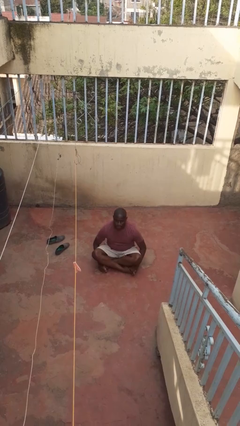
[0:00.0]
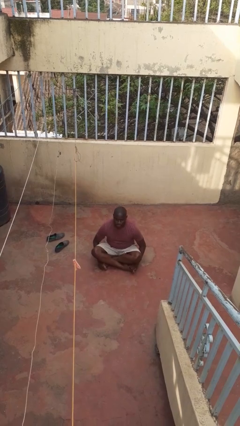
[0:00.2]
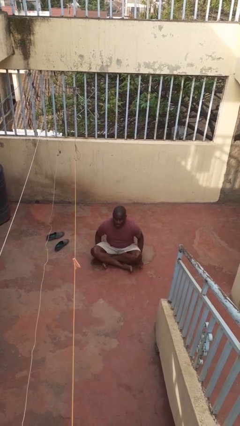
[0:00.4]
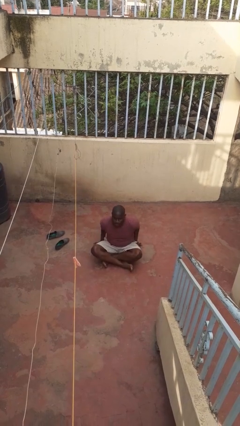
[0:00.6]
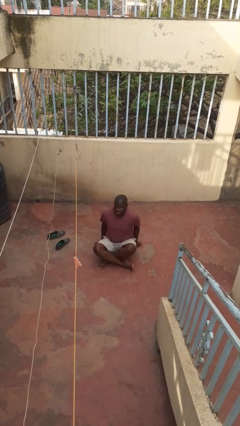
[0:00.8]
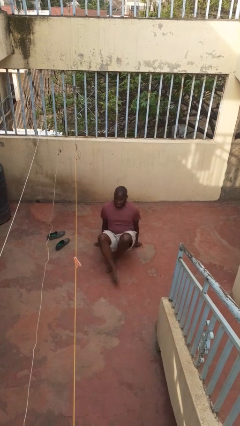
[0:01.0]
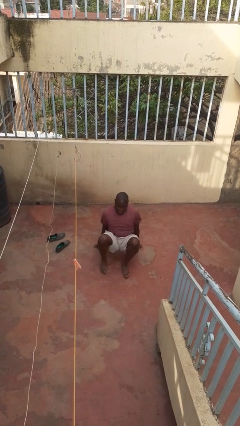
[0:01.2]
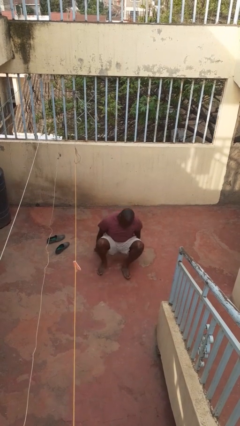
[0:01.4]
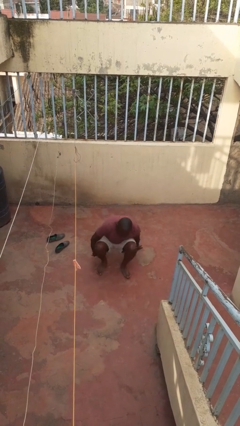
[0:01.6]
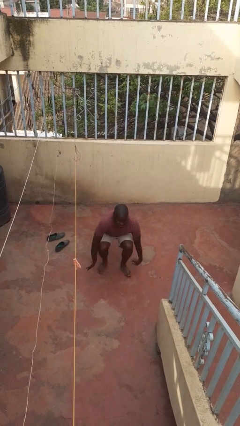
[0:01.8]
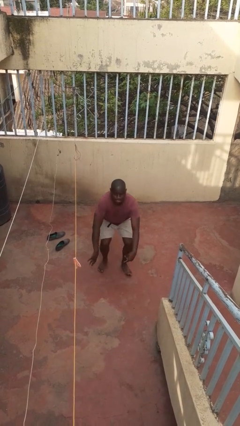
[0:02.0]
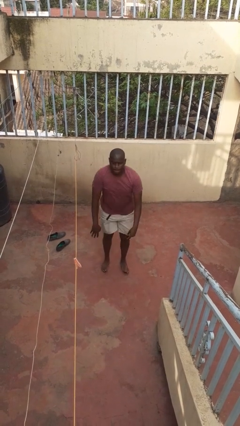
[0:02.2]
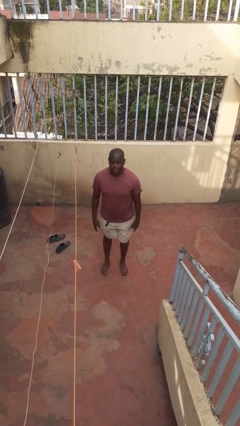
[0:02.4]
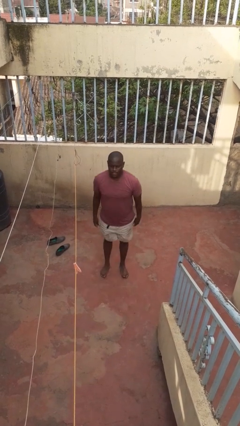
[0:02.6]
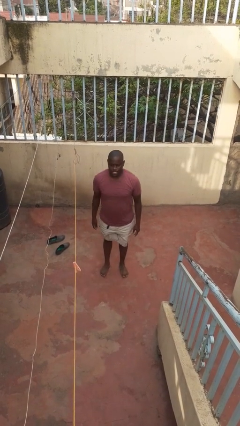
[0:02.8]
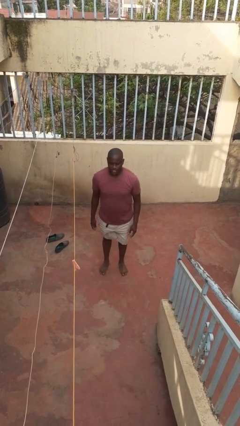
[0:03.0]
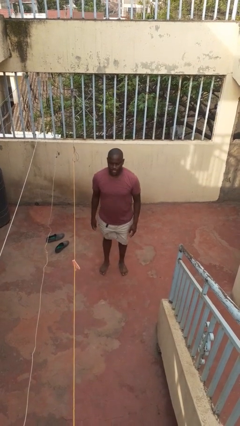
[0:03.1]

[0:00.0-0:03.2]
person stands up from floor

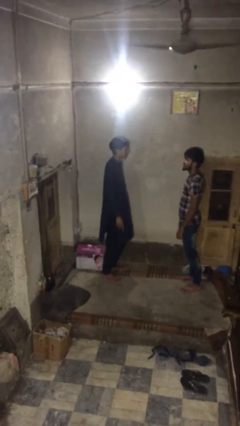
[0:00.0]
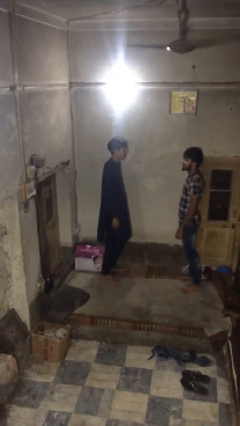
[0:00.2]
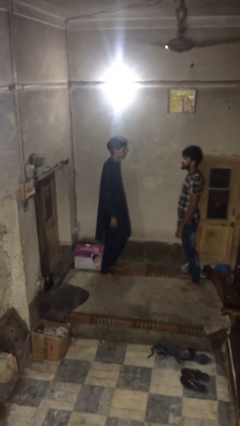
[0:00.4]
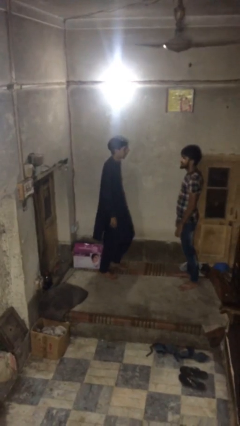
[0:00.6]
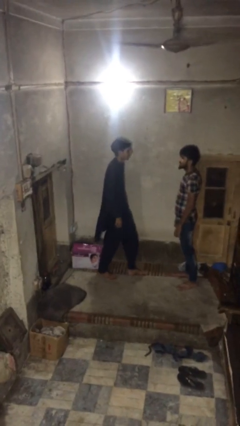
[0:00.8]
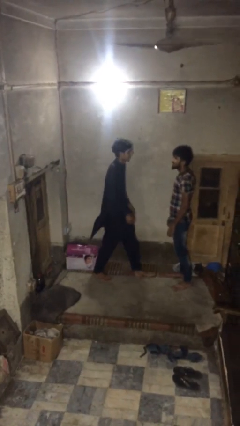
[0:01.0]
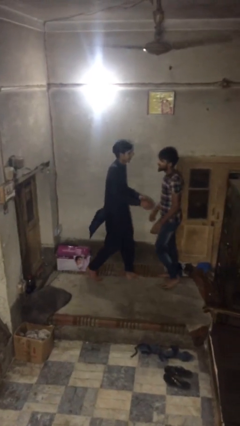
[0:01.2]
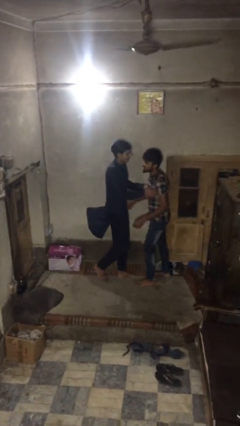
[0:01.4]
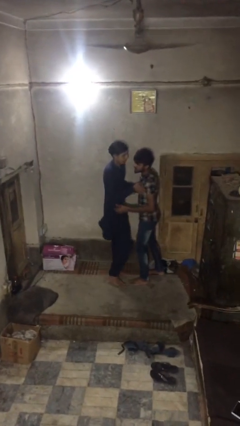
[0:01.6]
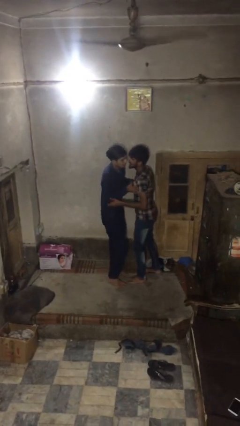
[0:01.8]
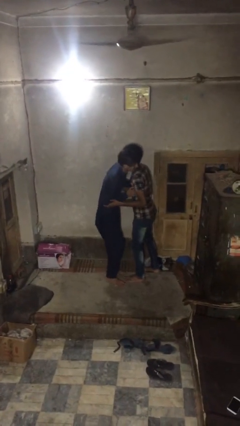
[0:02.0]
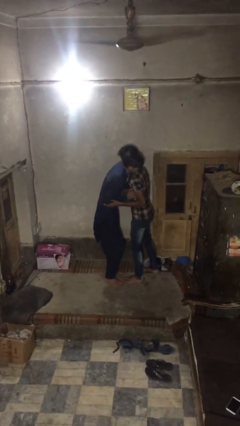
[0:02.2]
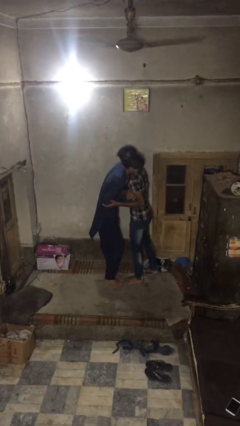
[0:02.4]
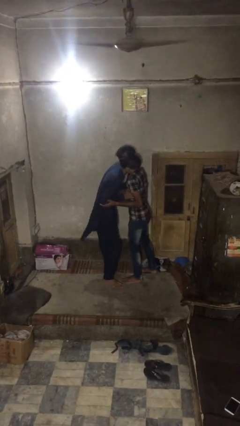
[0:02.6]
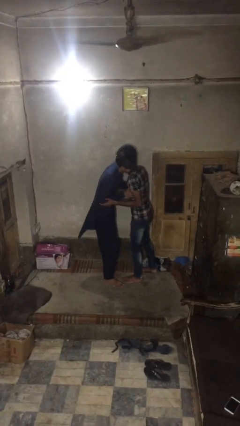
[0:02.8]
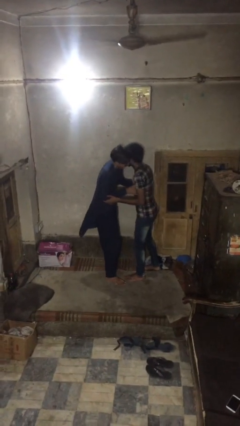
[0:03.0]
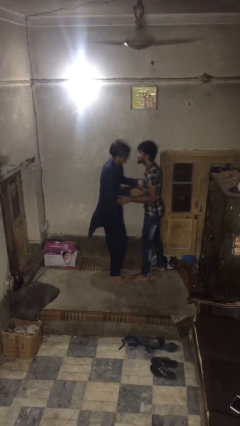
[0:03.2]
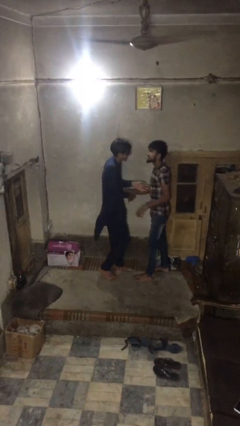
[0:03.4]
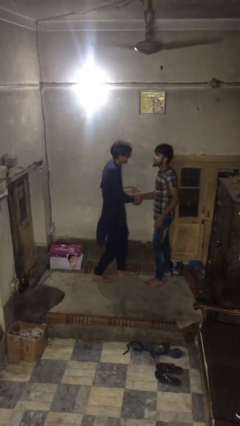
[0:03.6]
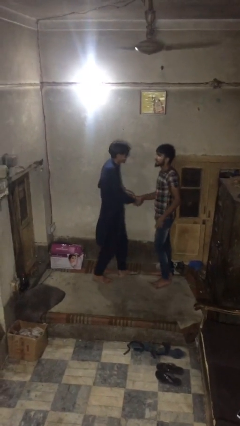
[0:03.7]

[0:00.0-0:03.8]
person embraces person

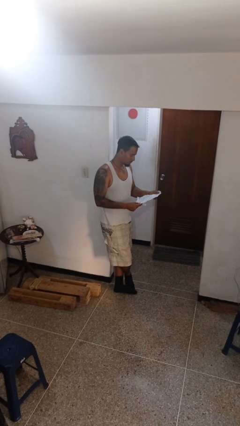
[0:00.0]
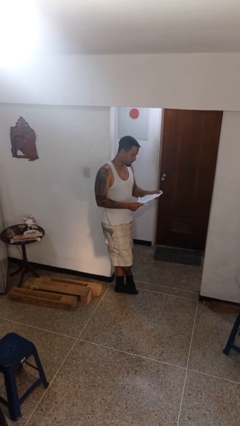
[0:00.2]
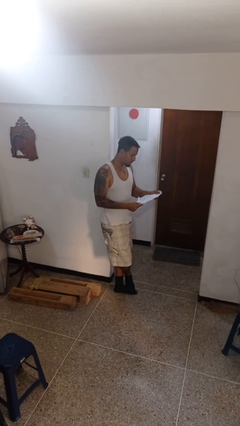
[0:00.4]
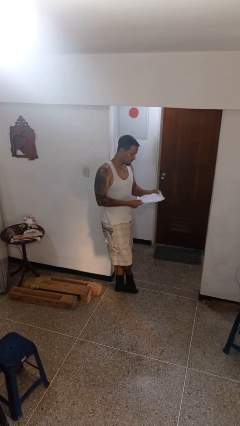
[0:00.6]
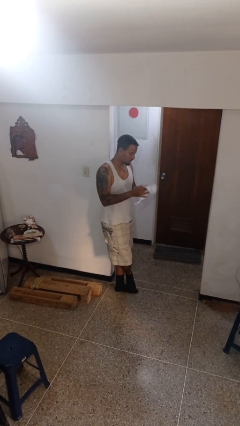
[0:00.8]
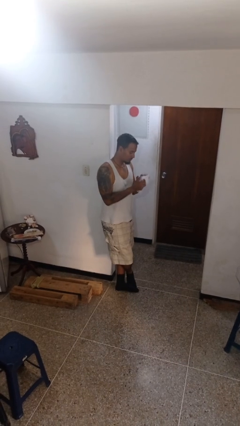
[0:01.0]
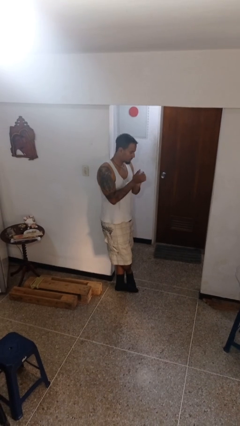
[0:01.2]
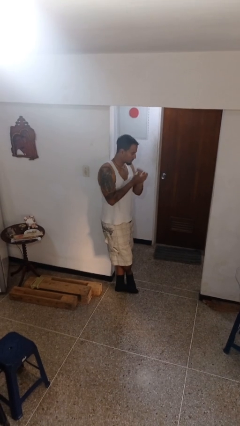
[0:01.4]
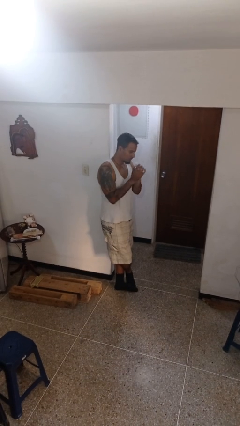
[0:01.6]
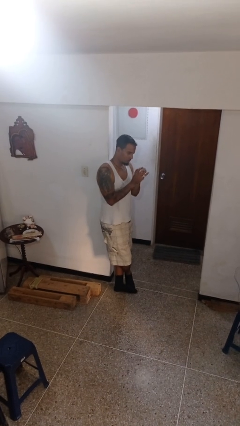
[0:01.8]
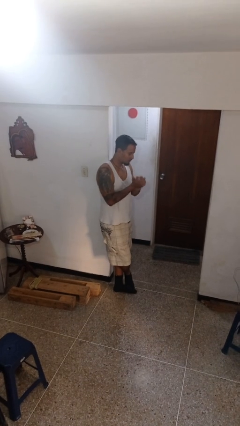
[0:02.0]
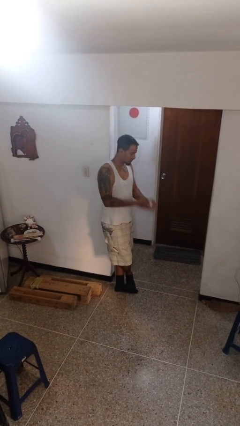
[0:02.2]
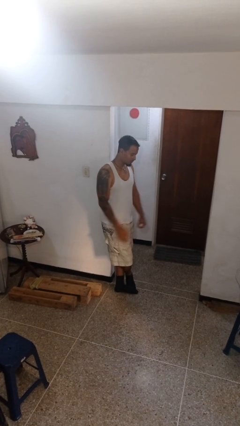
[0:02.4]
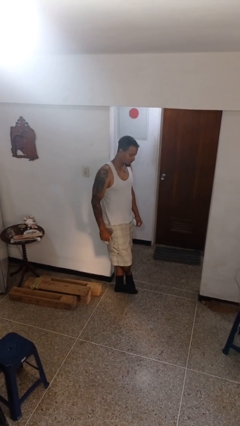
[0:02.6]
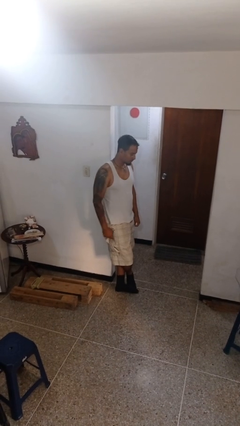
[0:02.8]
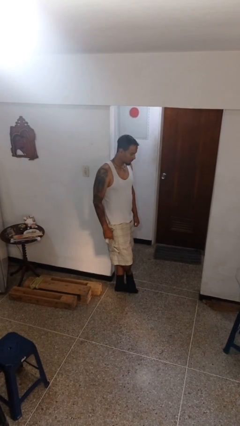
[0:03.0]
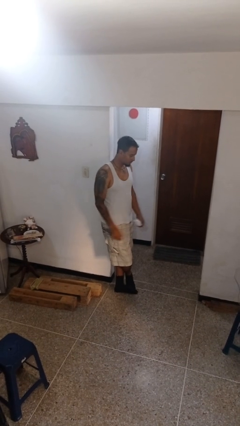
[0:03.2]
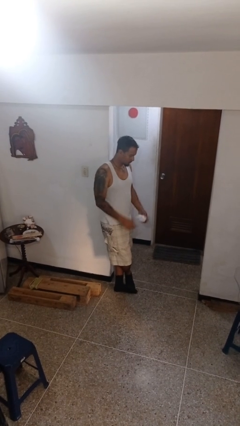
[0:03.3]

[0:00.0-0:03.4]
person crumples paper

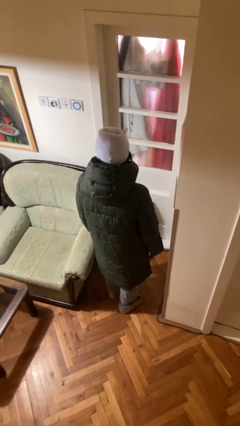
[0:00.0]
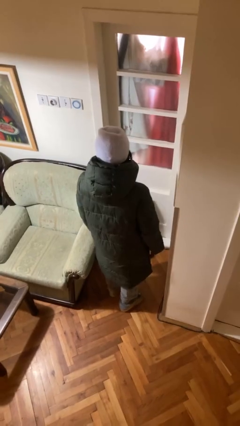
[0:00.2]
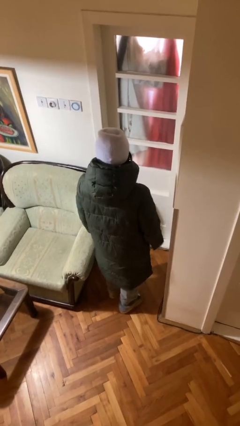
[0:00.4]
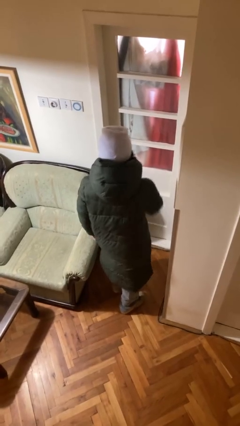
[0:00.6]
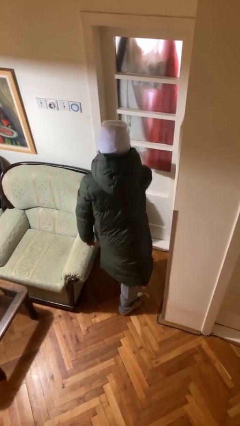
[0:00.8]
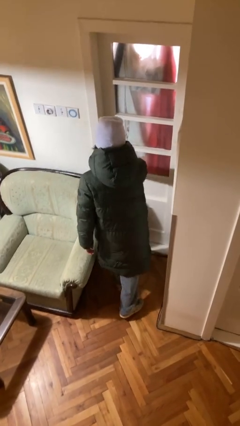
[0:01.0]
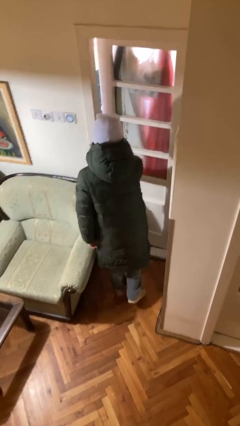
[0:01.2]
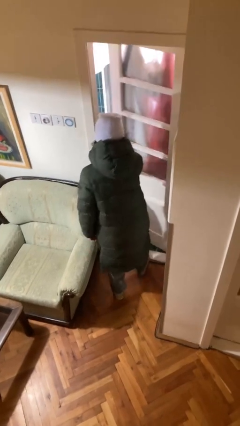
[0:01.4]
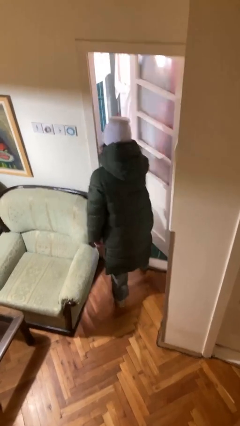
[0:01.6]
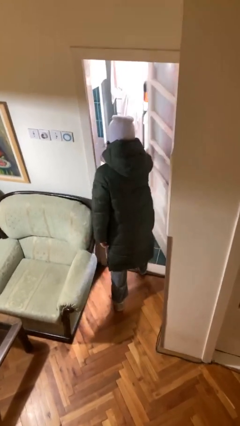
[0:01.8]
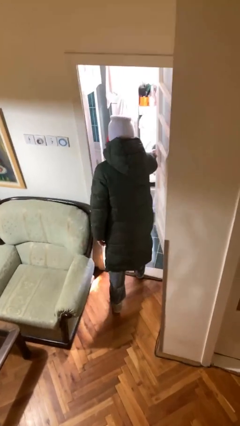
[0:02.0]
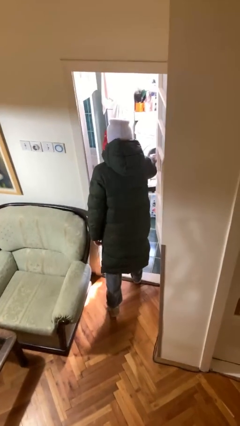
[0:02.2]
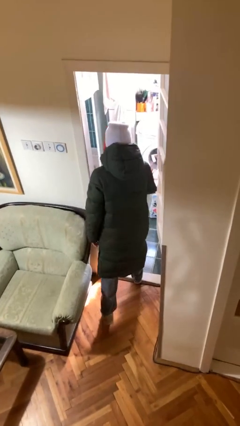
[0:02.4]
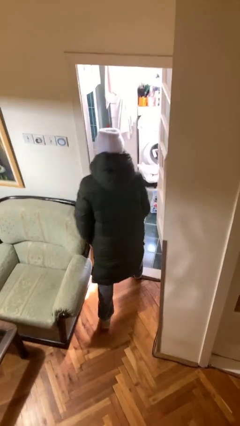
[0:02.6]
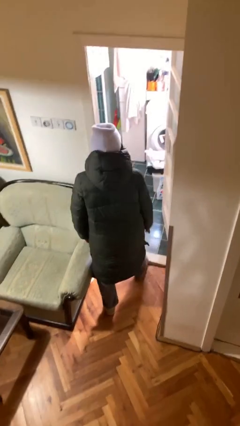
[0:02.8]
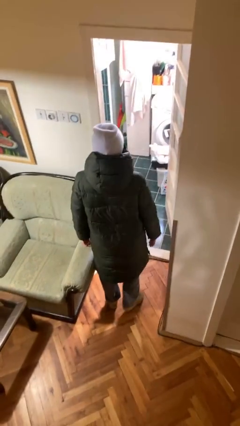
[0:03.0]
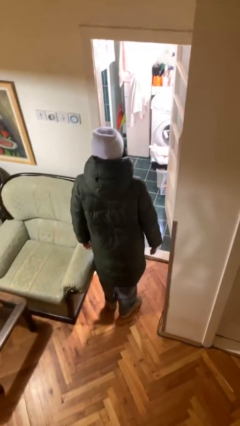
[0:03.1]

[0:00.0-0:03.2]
person opens facility door

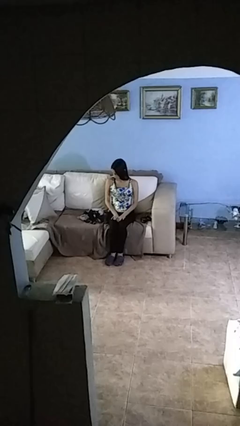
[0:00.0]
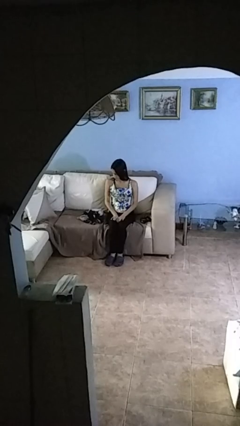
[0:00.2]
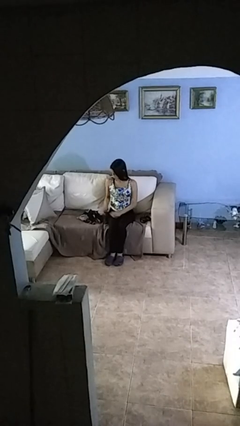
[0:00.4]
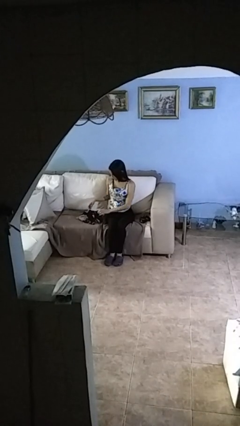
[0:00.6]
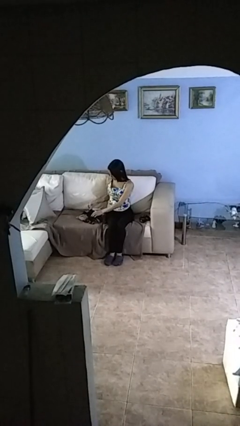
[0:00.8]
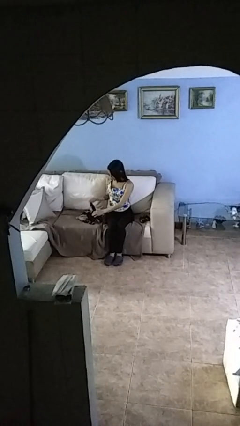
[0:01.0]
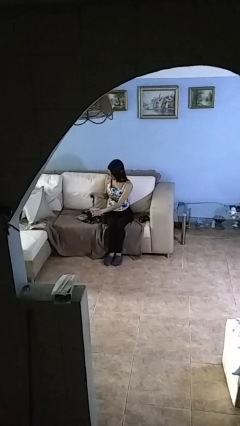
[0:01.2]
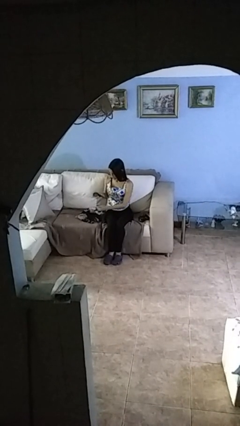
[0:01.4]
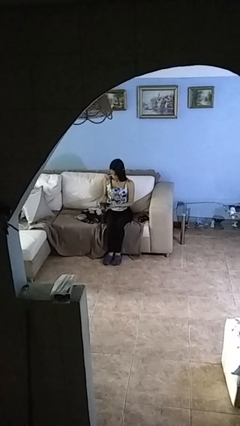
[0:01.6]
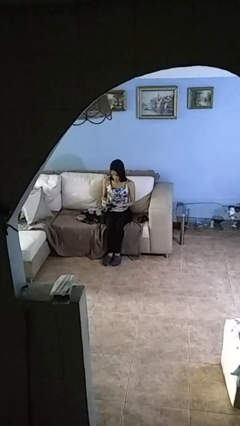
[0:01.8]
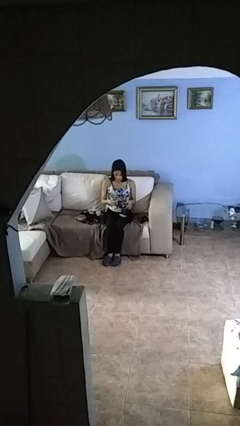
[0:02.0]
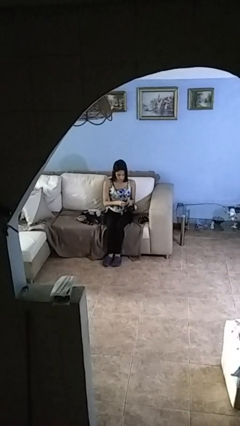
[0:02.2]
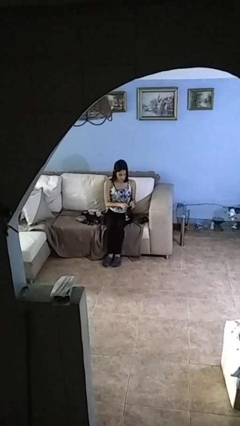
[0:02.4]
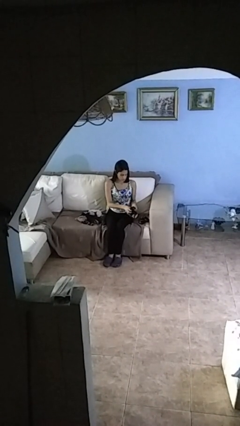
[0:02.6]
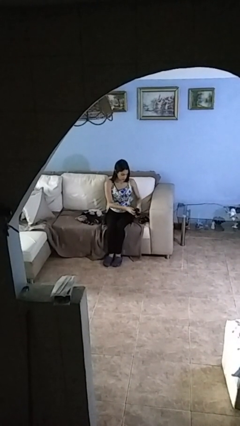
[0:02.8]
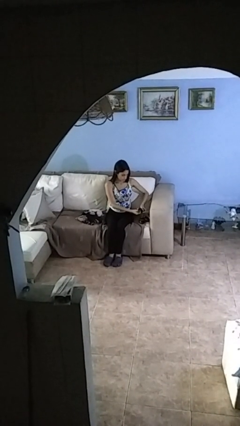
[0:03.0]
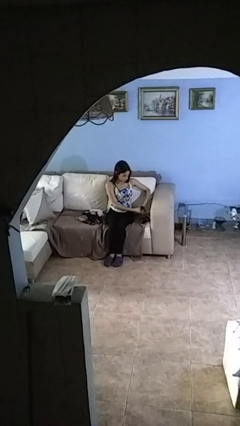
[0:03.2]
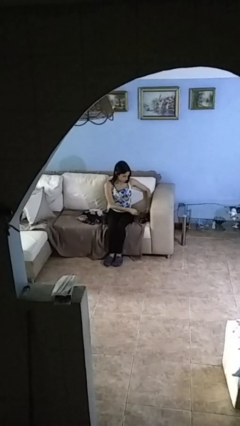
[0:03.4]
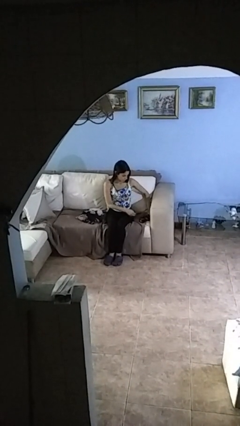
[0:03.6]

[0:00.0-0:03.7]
person folds socks

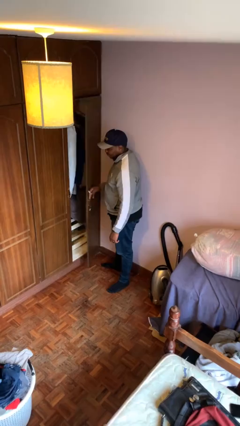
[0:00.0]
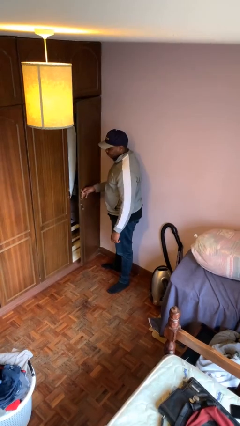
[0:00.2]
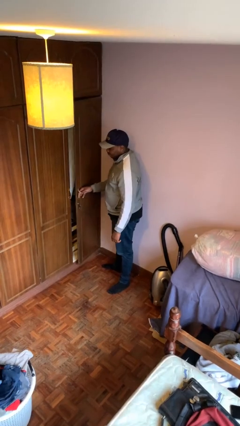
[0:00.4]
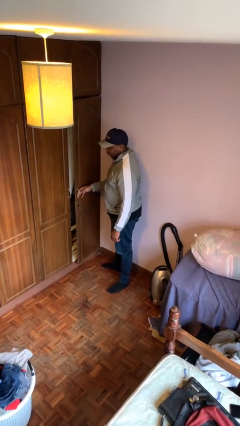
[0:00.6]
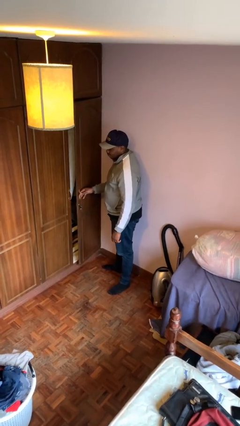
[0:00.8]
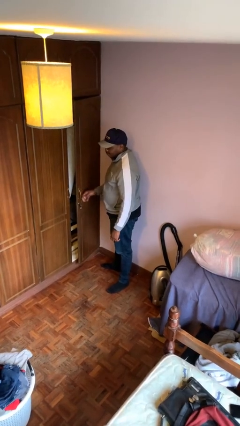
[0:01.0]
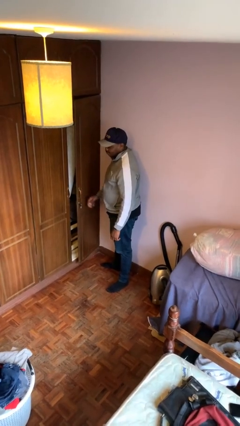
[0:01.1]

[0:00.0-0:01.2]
person closes closet door
